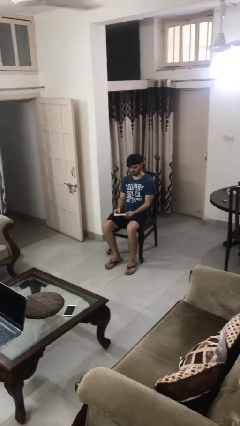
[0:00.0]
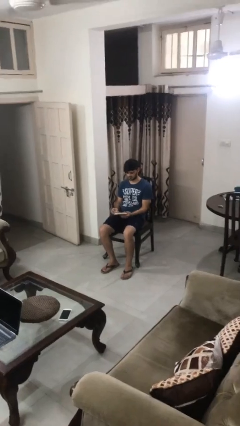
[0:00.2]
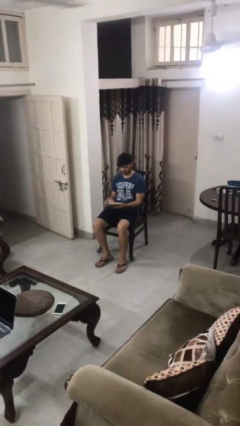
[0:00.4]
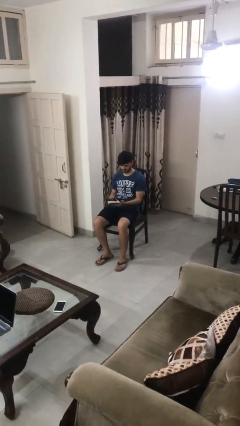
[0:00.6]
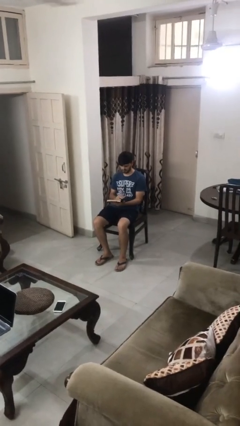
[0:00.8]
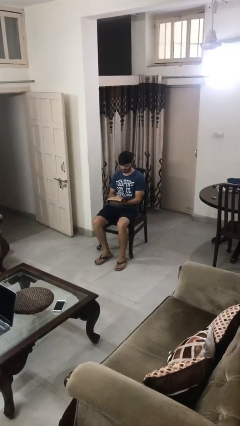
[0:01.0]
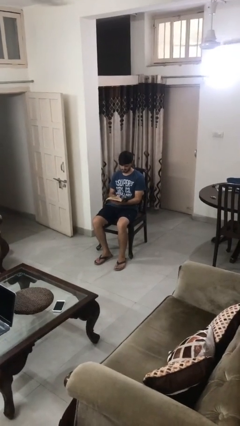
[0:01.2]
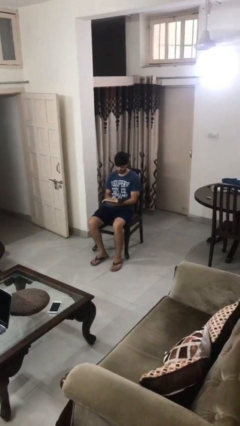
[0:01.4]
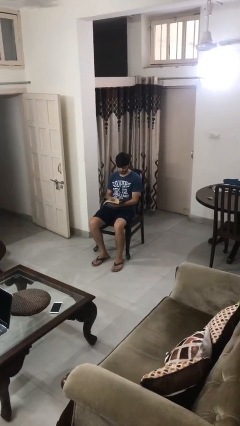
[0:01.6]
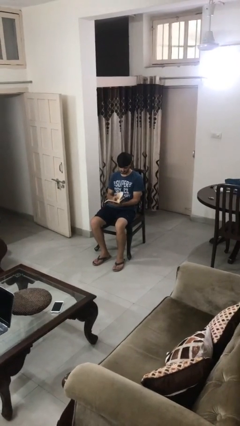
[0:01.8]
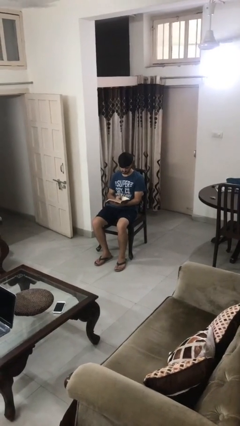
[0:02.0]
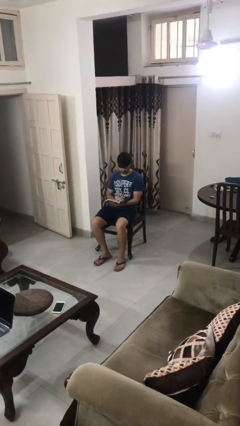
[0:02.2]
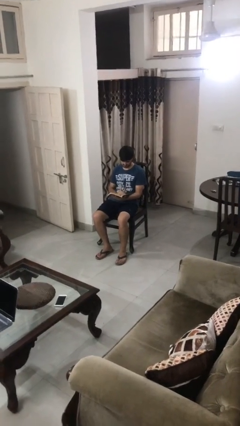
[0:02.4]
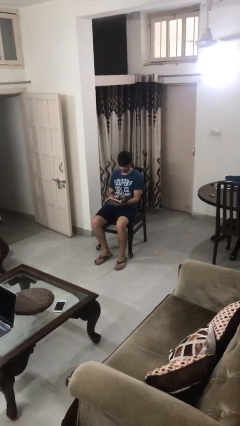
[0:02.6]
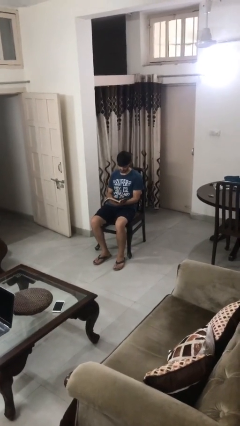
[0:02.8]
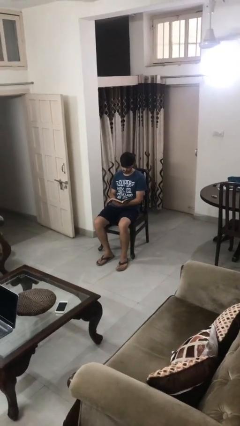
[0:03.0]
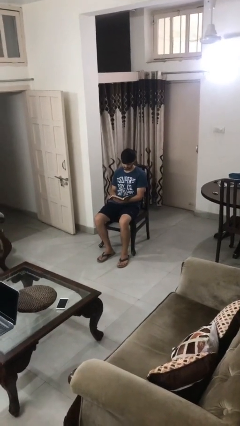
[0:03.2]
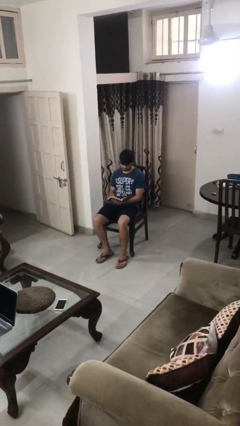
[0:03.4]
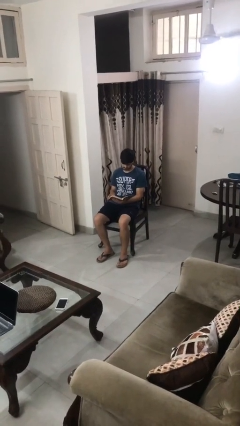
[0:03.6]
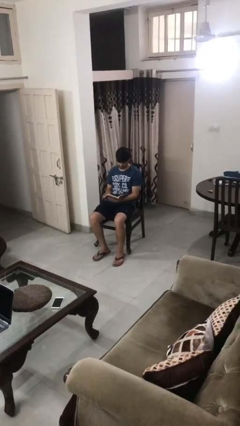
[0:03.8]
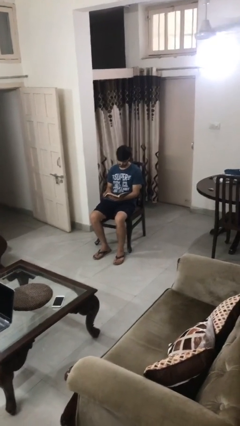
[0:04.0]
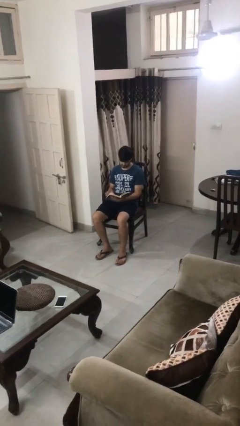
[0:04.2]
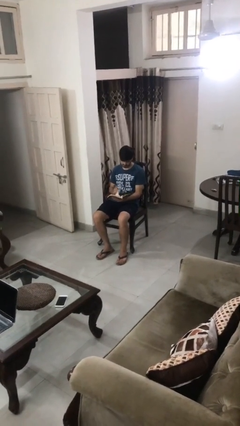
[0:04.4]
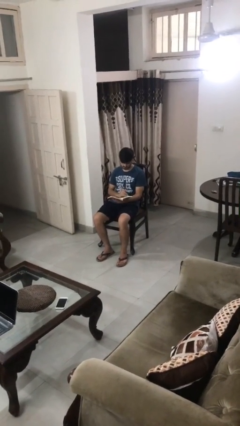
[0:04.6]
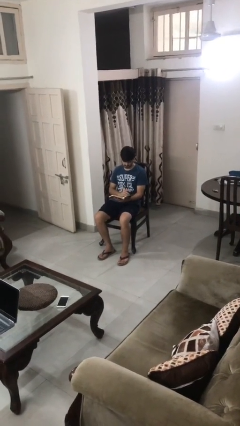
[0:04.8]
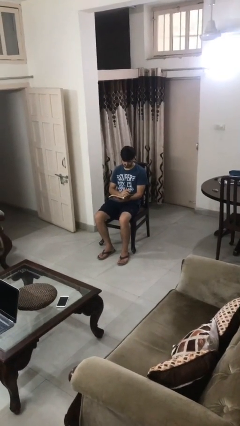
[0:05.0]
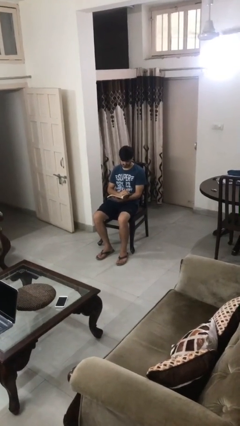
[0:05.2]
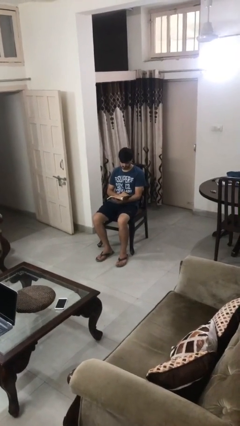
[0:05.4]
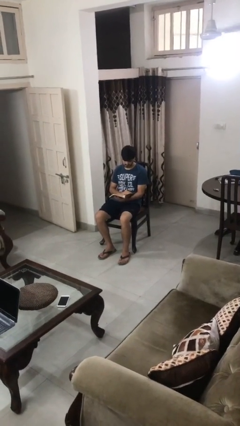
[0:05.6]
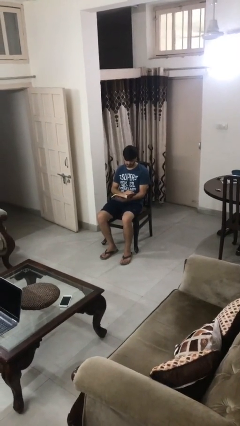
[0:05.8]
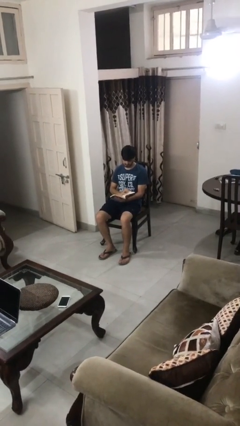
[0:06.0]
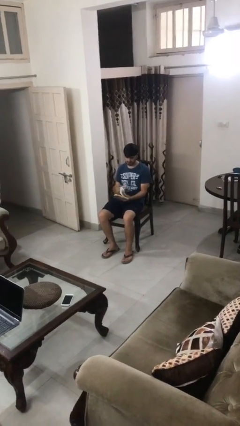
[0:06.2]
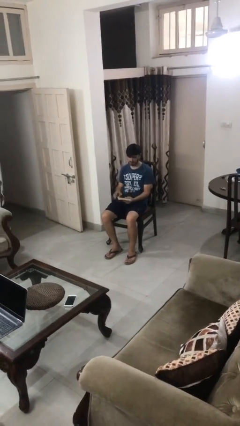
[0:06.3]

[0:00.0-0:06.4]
person reads book

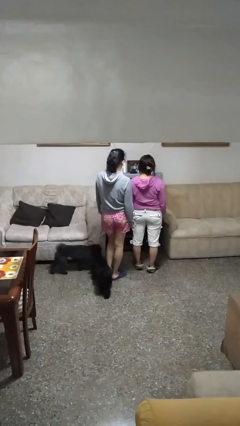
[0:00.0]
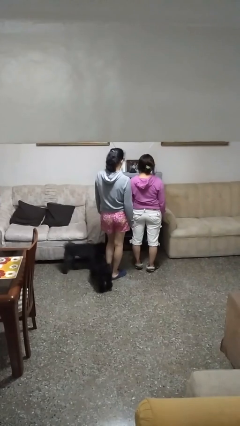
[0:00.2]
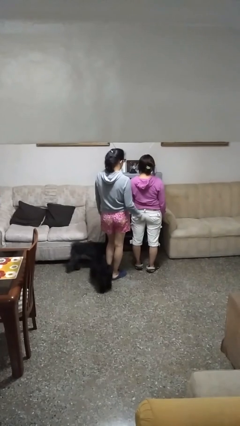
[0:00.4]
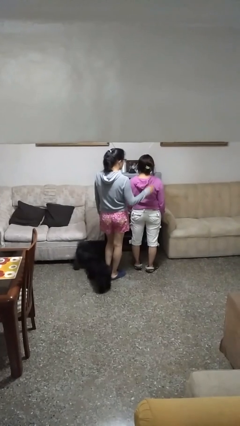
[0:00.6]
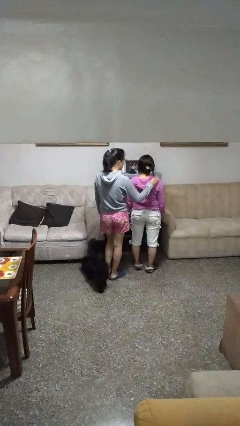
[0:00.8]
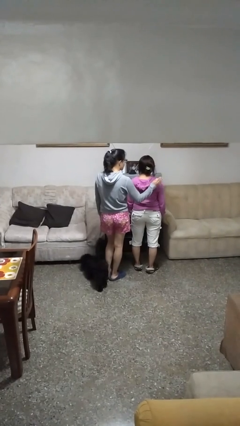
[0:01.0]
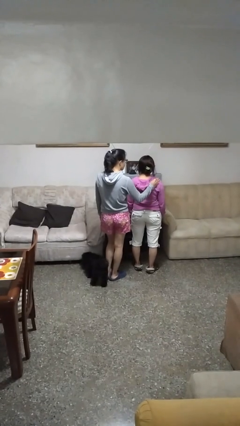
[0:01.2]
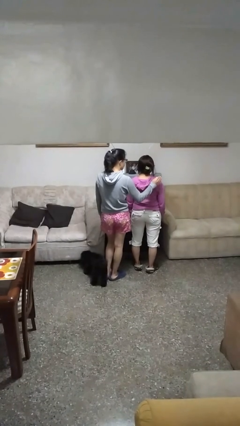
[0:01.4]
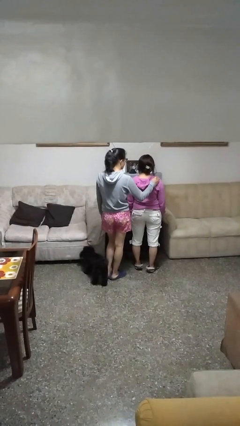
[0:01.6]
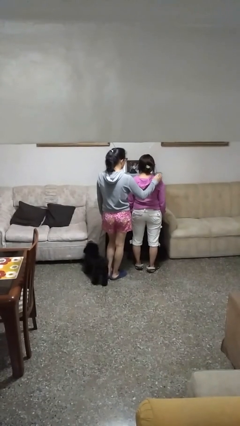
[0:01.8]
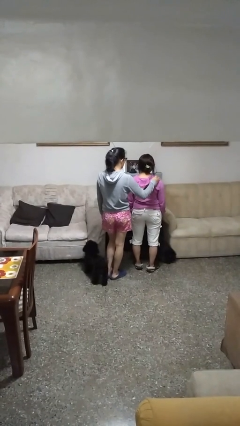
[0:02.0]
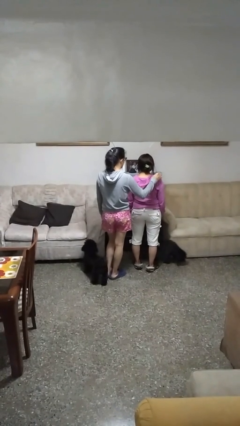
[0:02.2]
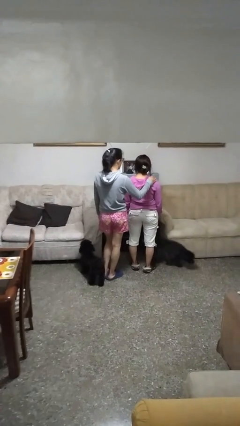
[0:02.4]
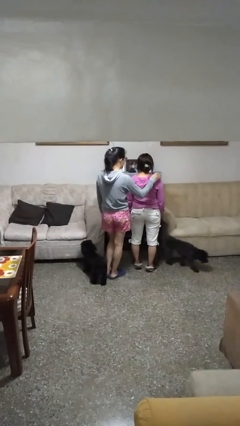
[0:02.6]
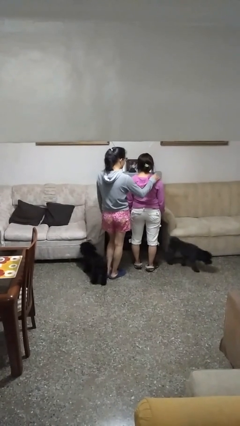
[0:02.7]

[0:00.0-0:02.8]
person touches back of person

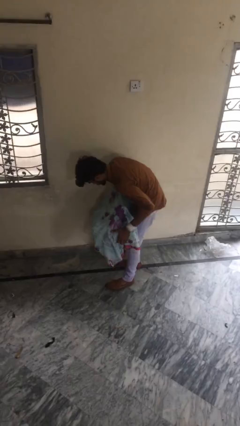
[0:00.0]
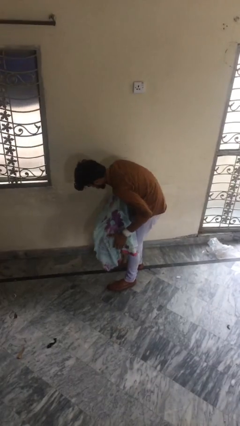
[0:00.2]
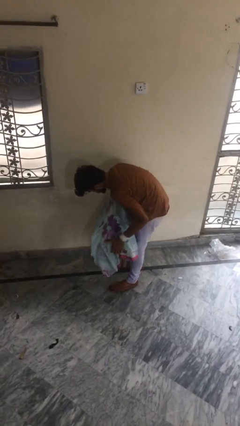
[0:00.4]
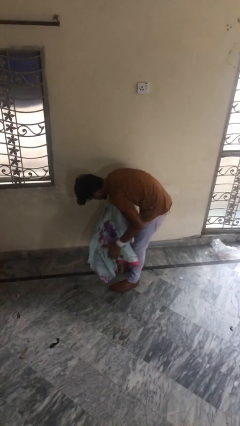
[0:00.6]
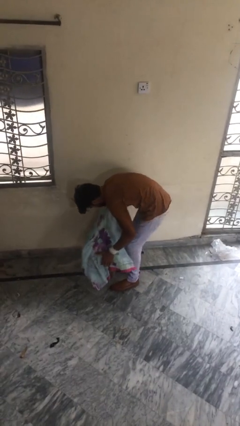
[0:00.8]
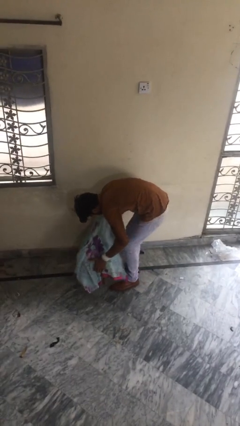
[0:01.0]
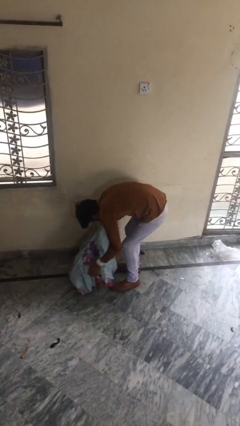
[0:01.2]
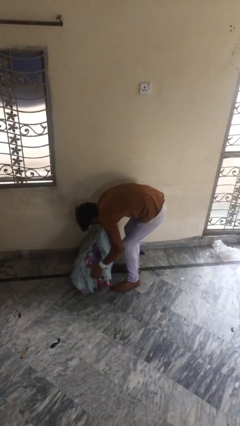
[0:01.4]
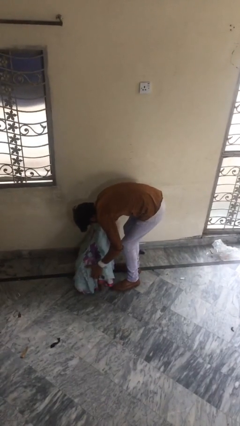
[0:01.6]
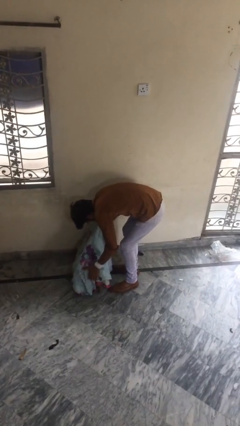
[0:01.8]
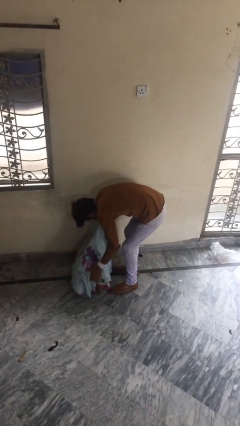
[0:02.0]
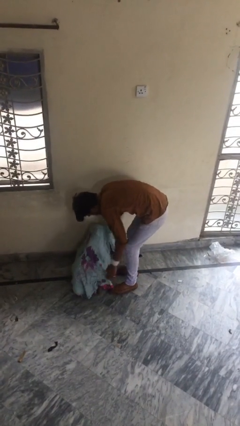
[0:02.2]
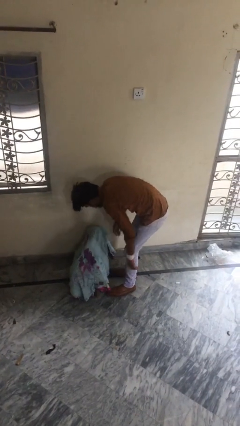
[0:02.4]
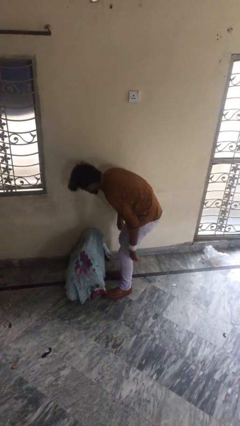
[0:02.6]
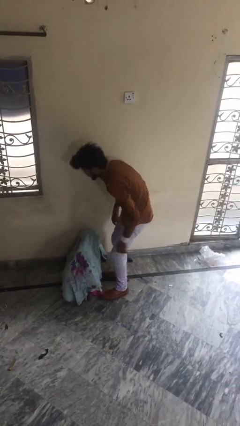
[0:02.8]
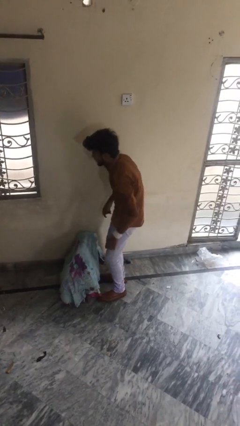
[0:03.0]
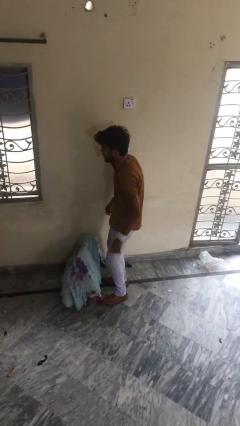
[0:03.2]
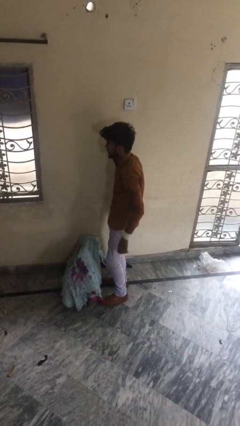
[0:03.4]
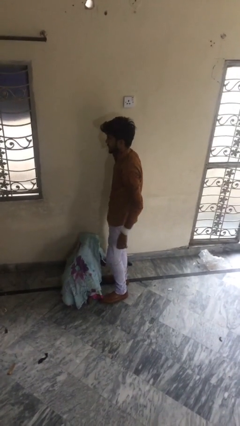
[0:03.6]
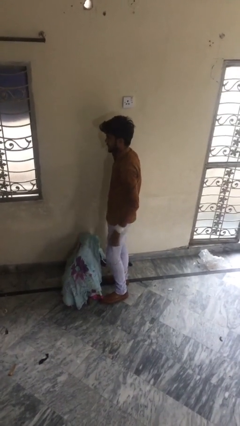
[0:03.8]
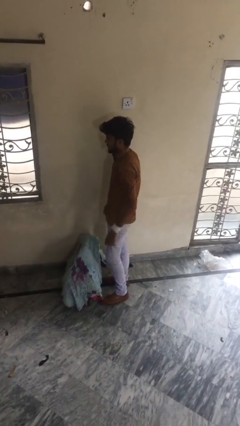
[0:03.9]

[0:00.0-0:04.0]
person puts down object on floor

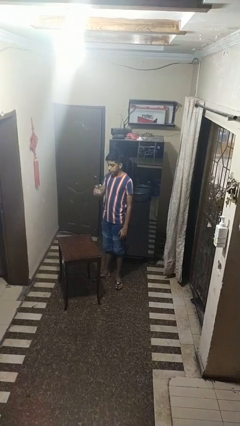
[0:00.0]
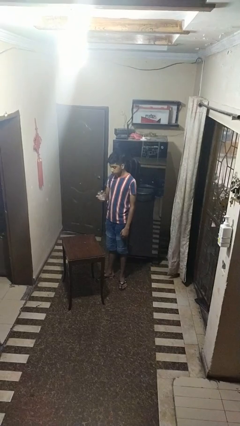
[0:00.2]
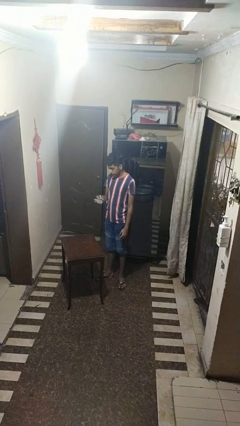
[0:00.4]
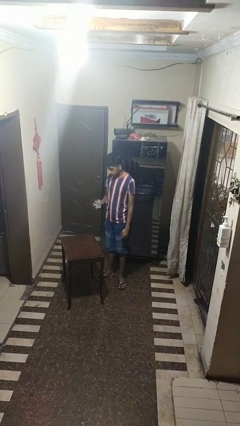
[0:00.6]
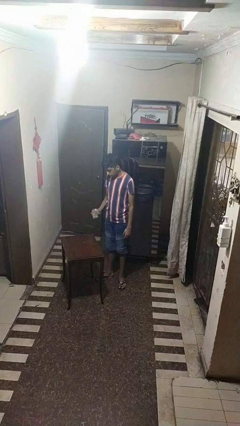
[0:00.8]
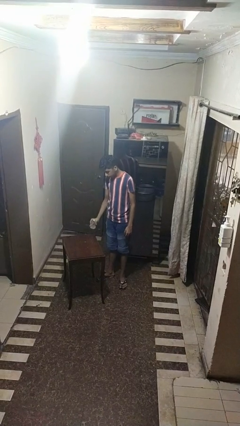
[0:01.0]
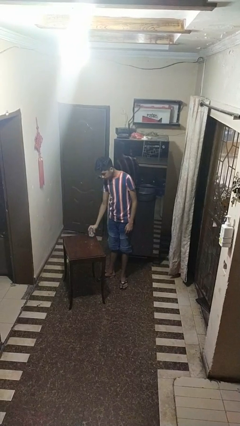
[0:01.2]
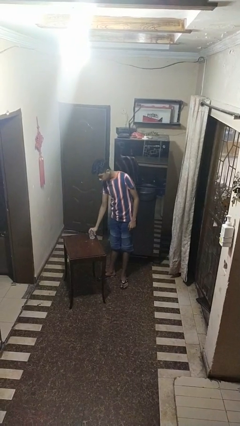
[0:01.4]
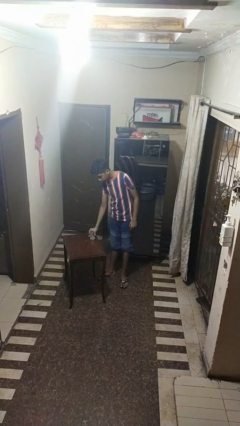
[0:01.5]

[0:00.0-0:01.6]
person puts down object on table

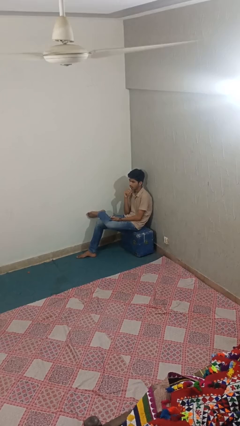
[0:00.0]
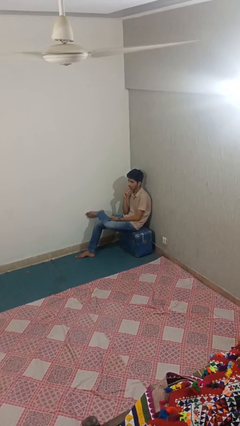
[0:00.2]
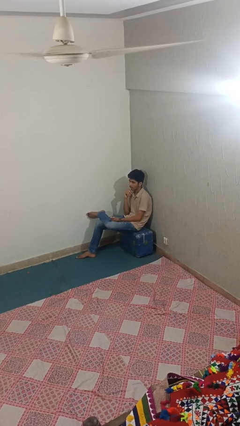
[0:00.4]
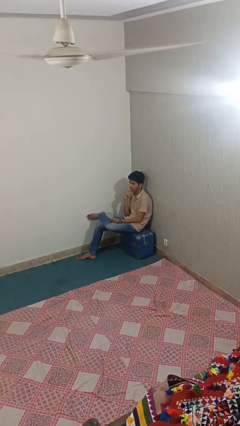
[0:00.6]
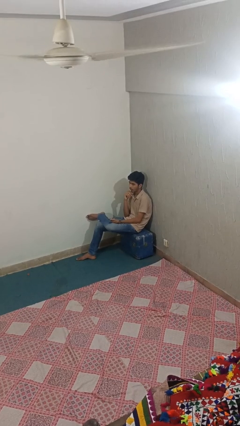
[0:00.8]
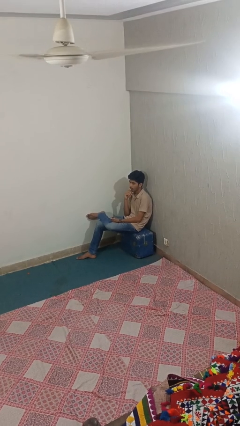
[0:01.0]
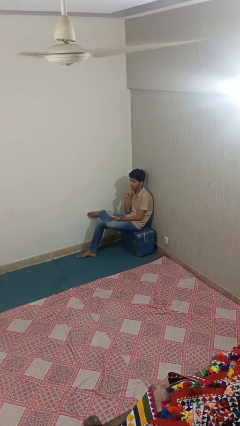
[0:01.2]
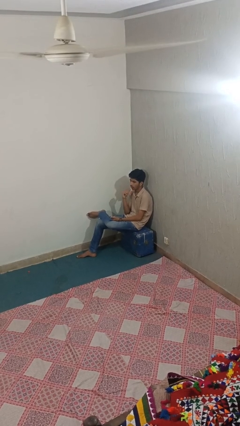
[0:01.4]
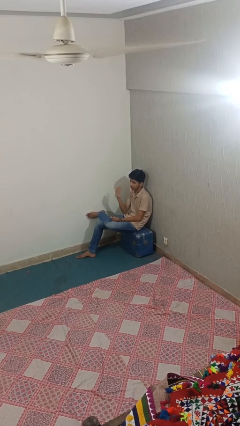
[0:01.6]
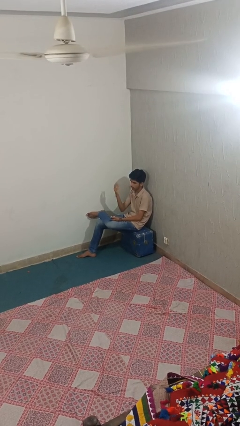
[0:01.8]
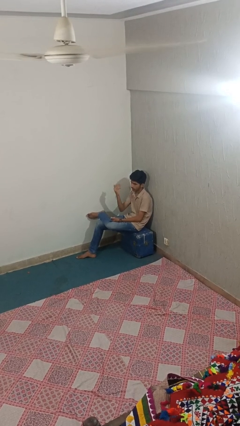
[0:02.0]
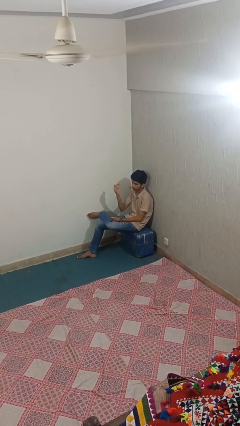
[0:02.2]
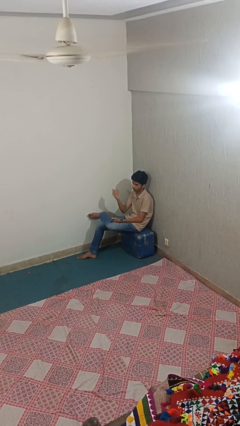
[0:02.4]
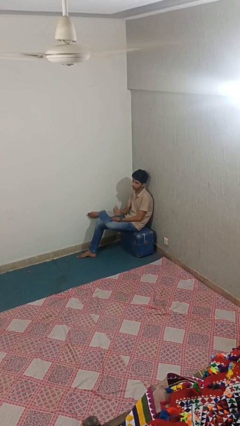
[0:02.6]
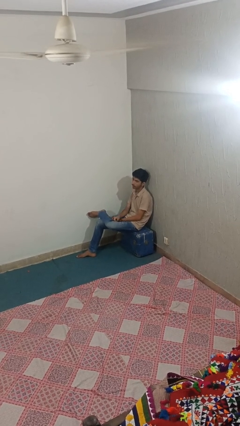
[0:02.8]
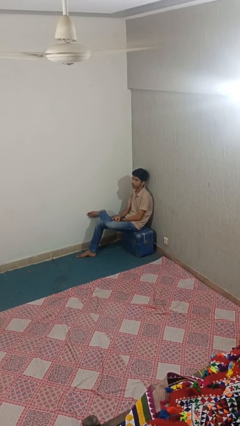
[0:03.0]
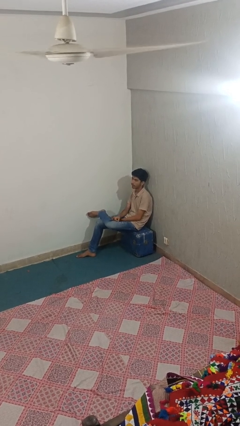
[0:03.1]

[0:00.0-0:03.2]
person gestures come here
